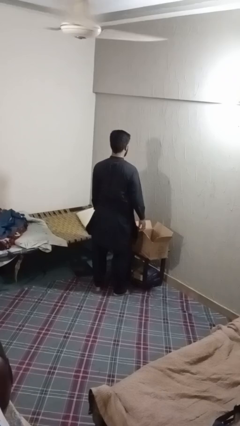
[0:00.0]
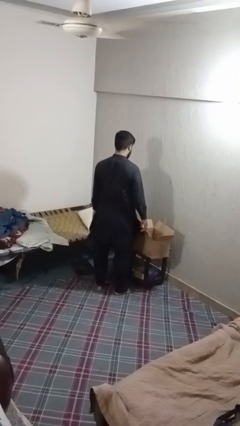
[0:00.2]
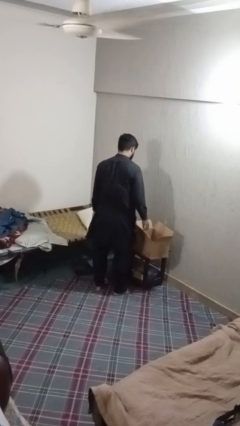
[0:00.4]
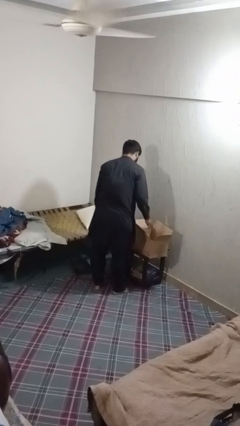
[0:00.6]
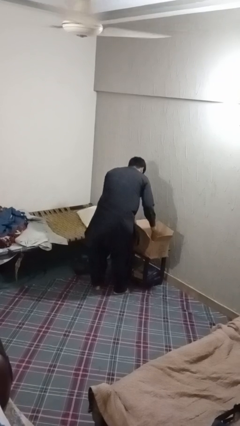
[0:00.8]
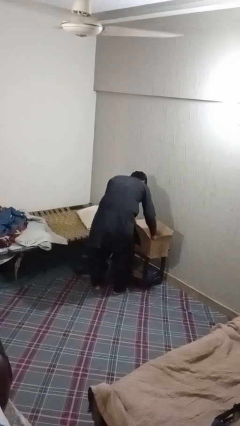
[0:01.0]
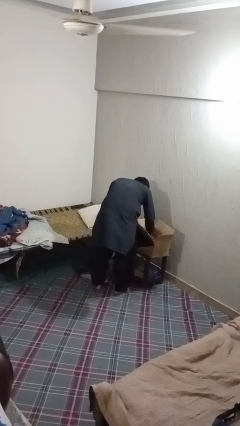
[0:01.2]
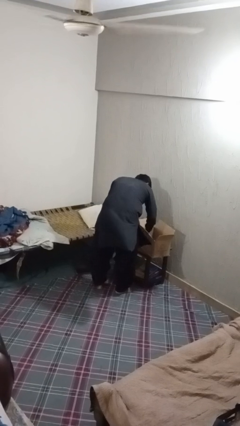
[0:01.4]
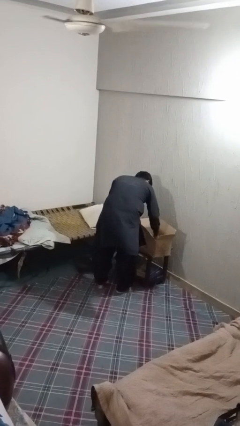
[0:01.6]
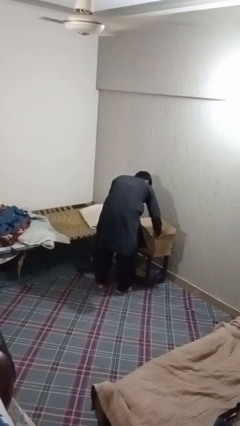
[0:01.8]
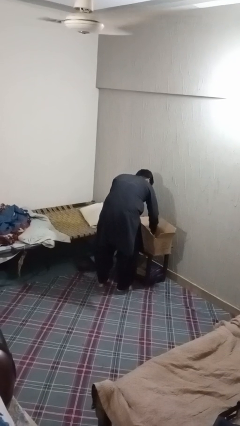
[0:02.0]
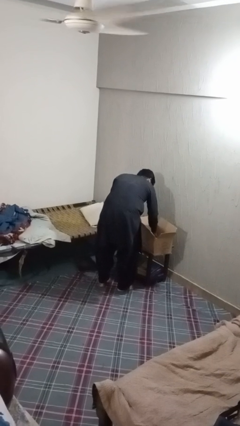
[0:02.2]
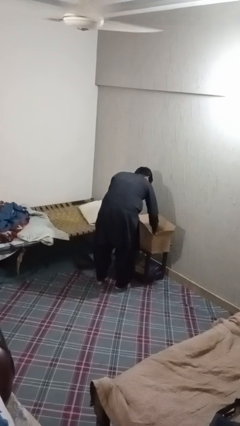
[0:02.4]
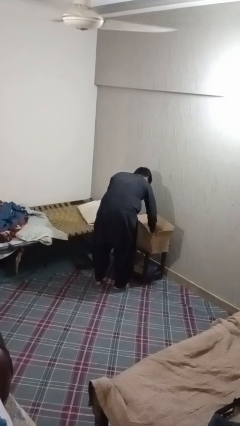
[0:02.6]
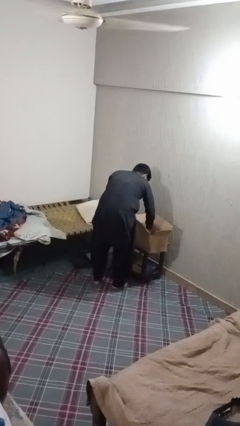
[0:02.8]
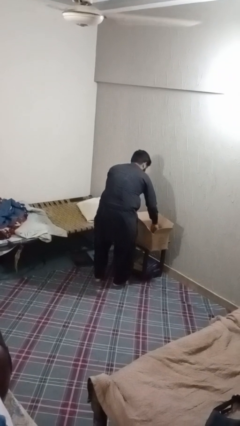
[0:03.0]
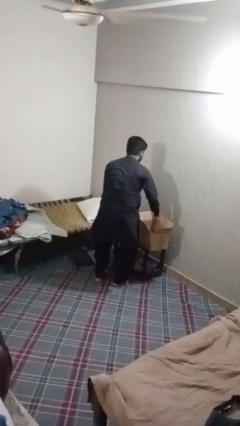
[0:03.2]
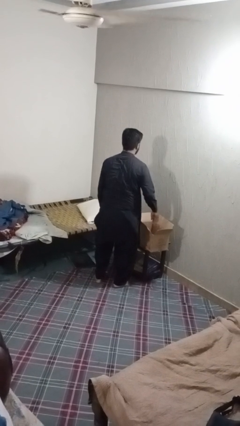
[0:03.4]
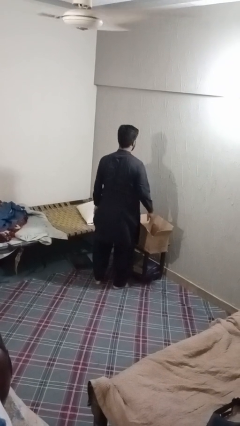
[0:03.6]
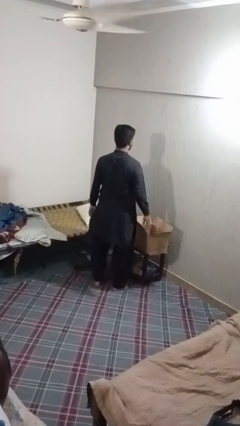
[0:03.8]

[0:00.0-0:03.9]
person searches in box

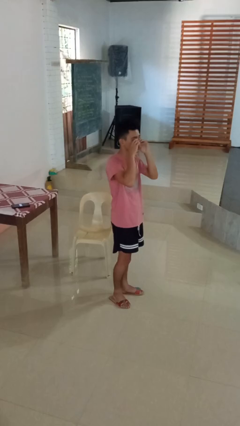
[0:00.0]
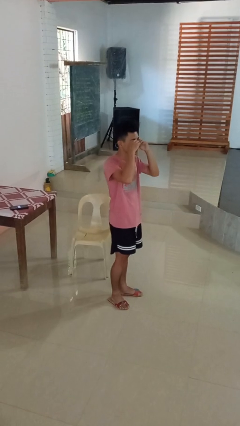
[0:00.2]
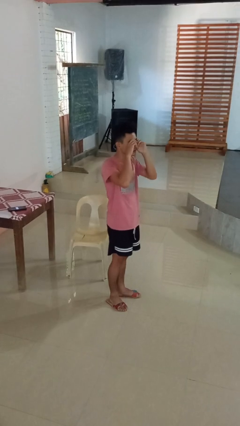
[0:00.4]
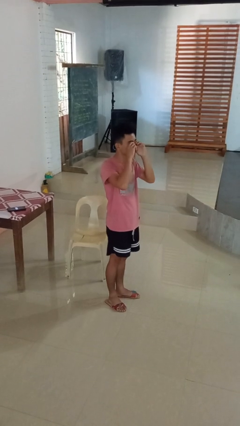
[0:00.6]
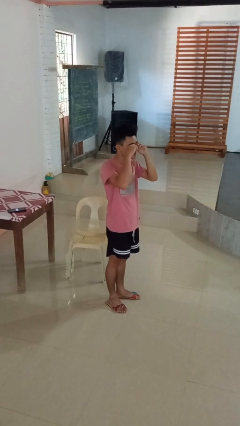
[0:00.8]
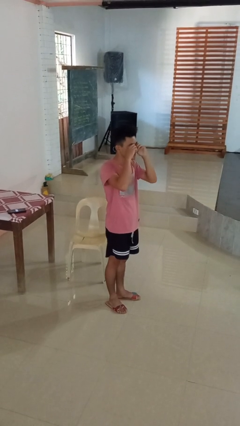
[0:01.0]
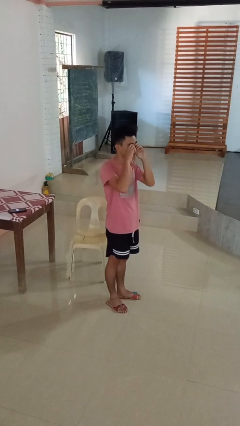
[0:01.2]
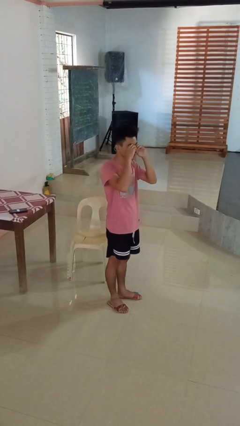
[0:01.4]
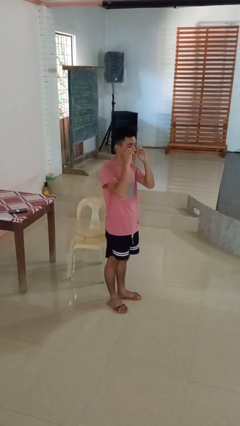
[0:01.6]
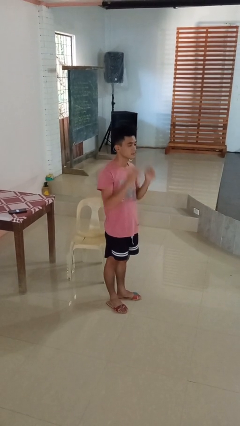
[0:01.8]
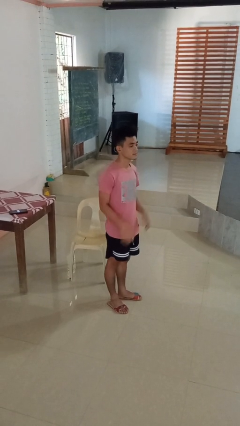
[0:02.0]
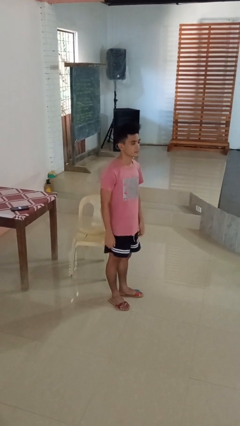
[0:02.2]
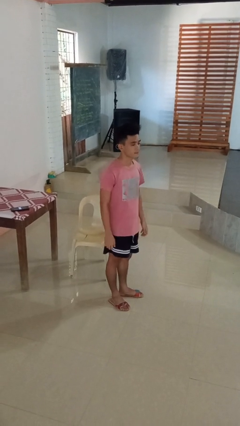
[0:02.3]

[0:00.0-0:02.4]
person rubs eyes

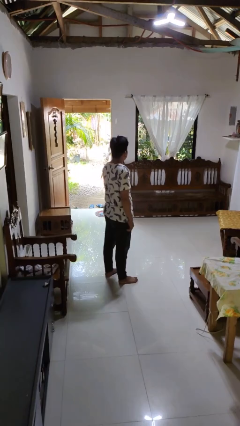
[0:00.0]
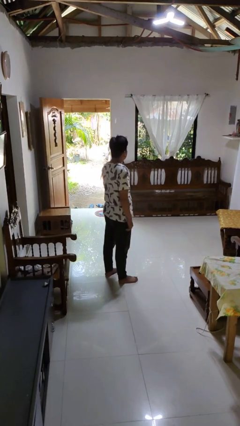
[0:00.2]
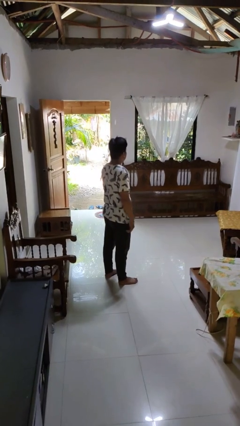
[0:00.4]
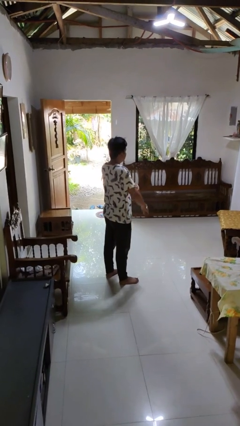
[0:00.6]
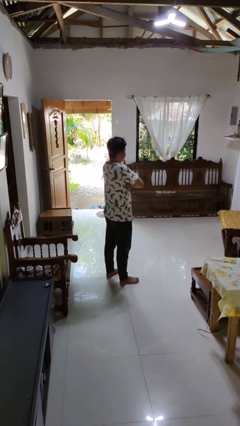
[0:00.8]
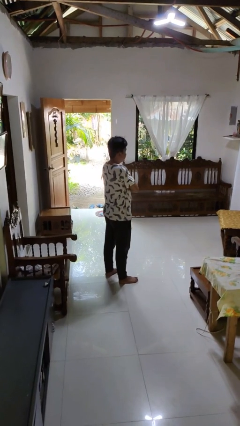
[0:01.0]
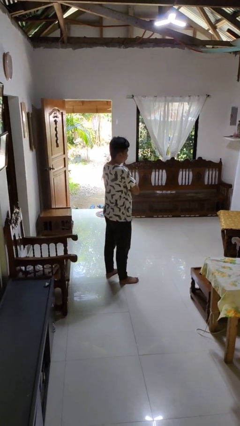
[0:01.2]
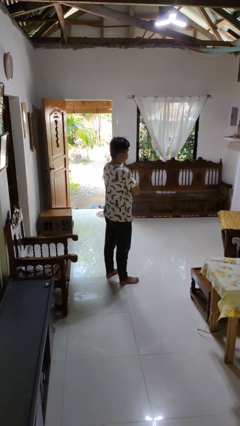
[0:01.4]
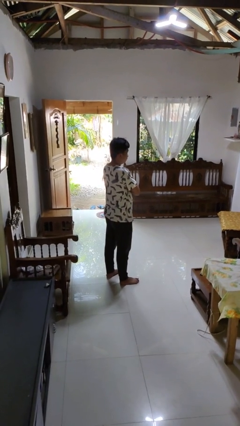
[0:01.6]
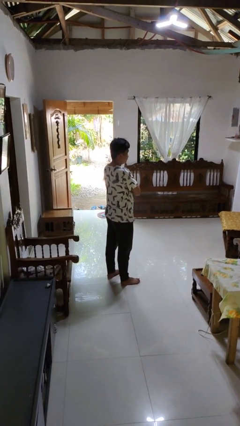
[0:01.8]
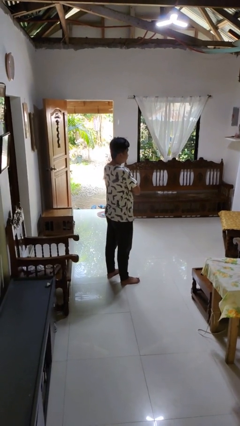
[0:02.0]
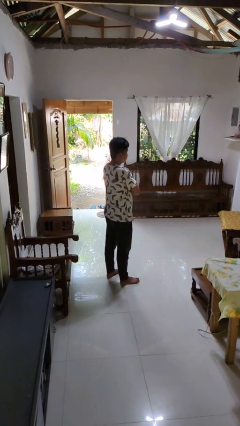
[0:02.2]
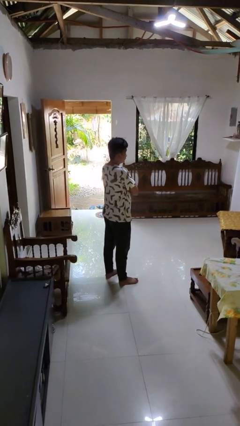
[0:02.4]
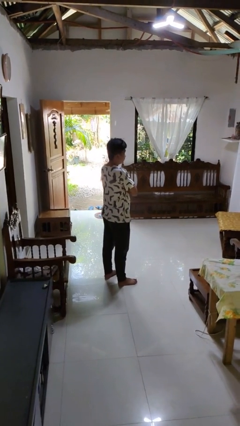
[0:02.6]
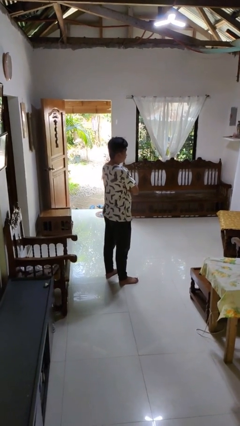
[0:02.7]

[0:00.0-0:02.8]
person crosses arms

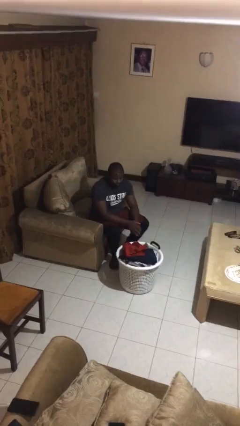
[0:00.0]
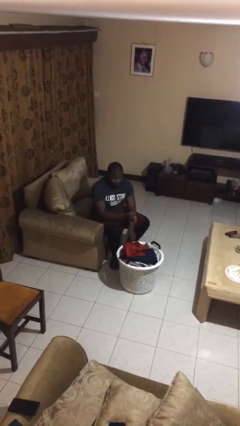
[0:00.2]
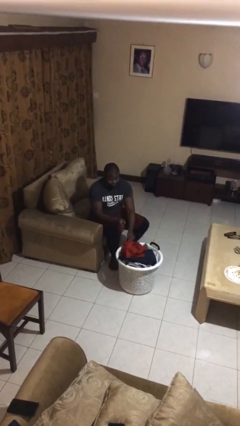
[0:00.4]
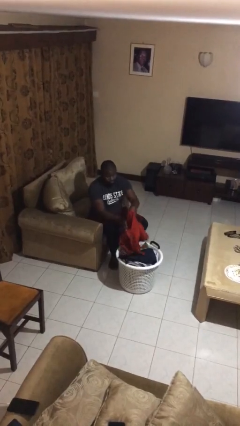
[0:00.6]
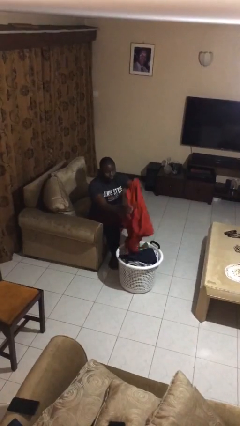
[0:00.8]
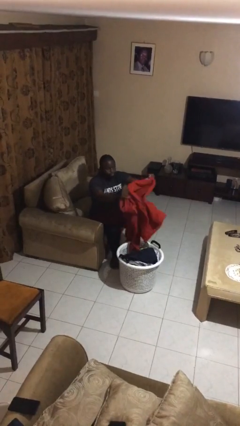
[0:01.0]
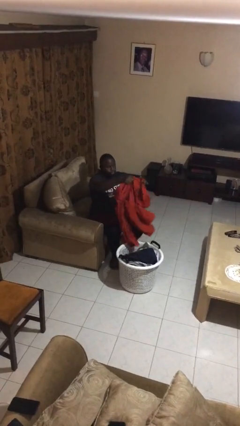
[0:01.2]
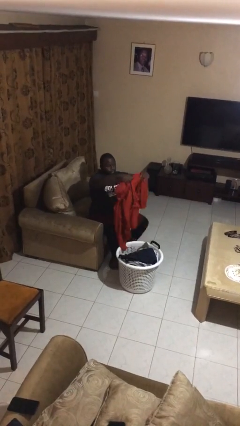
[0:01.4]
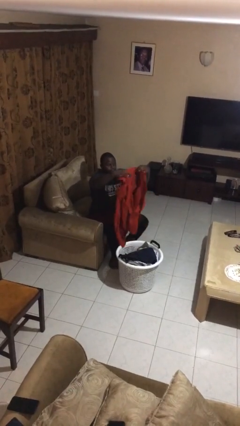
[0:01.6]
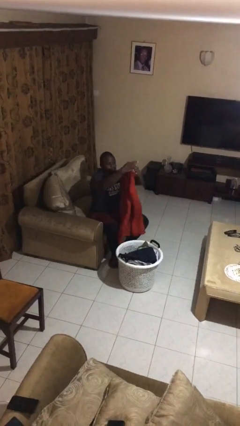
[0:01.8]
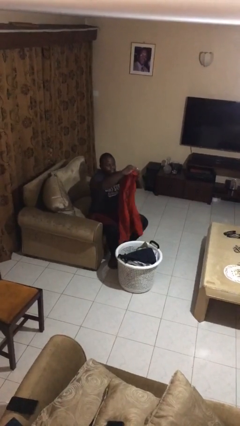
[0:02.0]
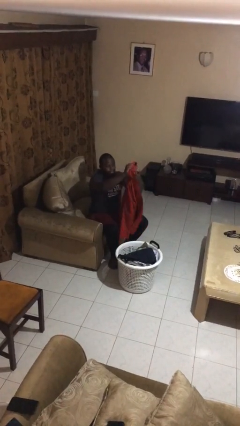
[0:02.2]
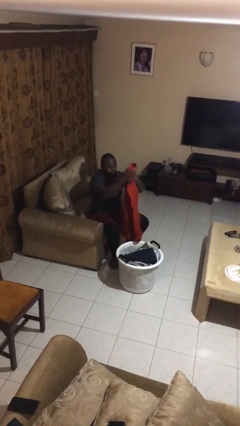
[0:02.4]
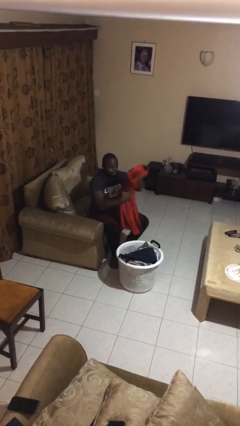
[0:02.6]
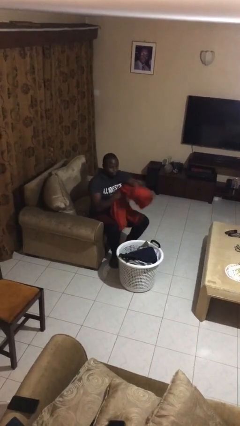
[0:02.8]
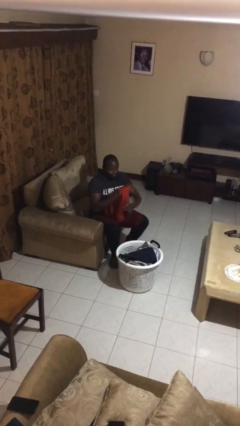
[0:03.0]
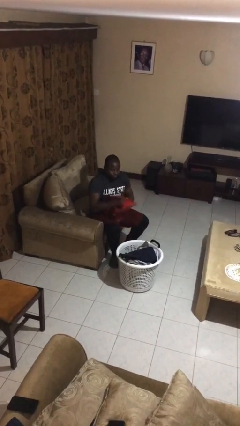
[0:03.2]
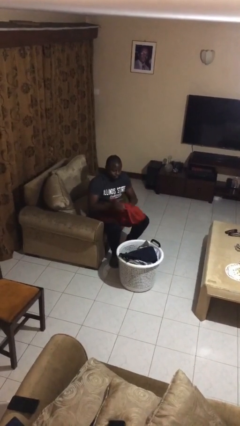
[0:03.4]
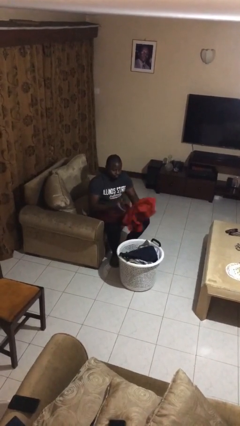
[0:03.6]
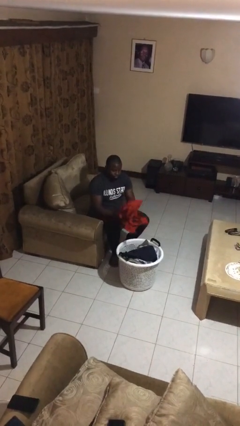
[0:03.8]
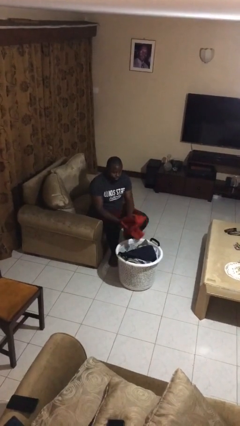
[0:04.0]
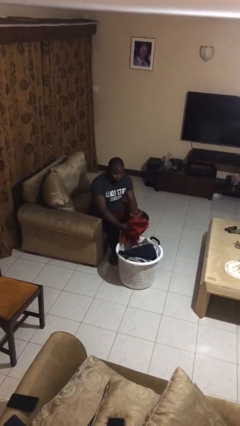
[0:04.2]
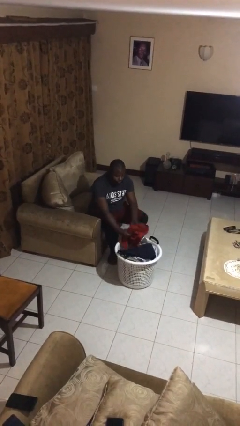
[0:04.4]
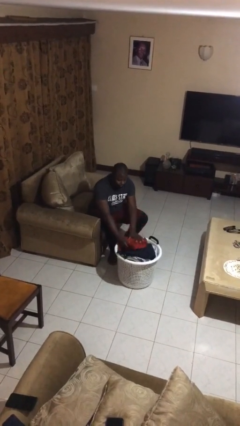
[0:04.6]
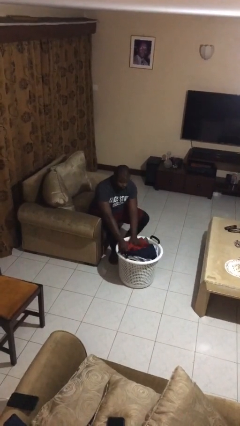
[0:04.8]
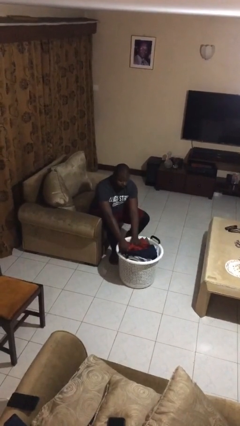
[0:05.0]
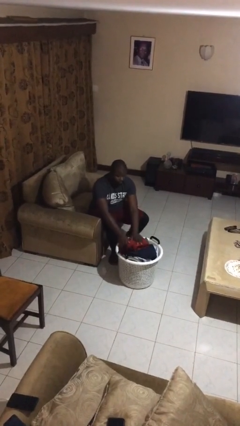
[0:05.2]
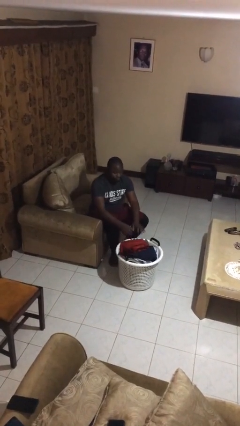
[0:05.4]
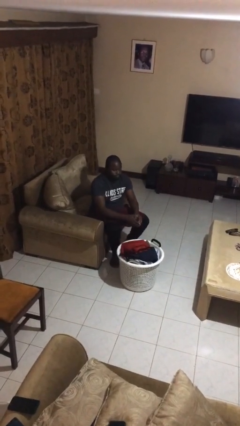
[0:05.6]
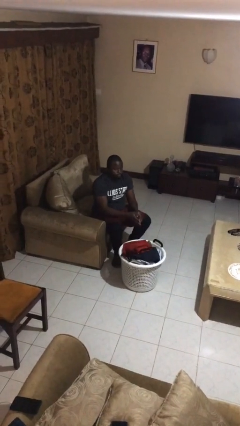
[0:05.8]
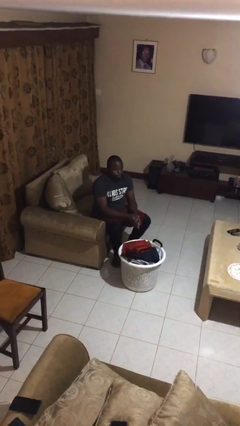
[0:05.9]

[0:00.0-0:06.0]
person folds shirt

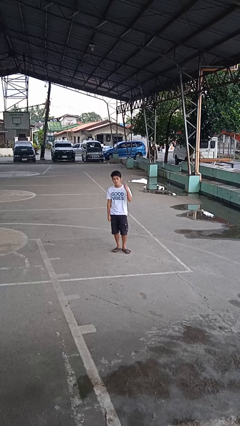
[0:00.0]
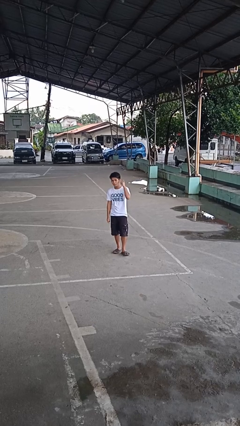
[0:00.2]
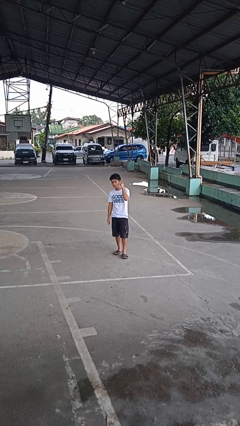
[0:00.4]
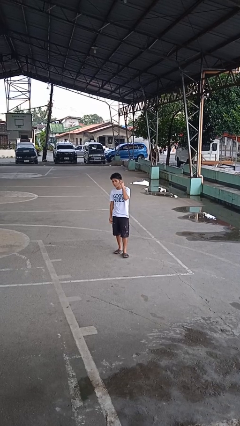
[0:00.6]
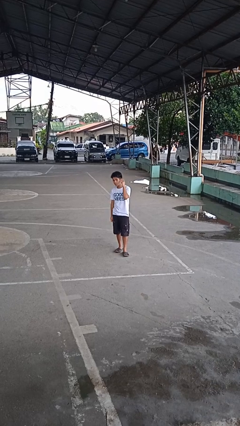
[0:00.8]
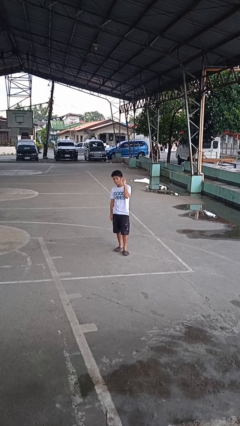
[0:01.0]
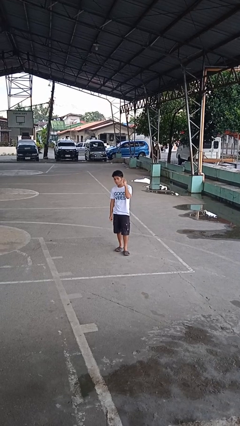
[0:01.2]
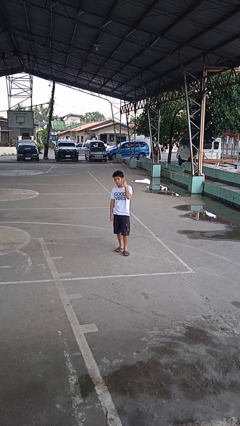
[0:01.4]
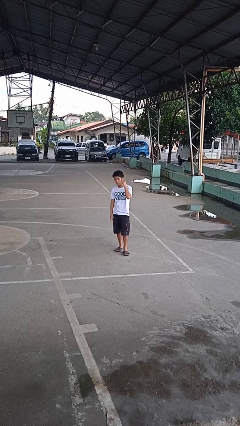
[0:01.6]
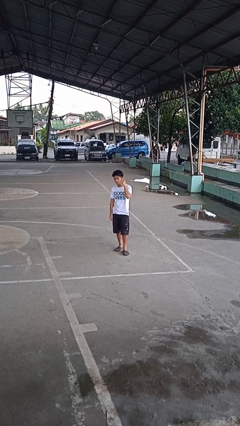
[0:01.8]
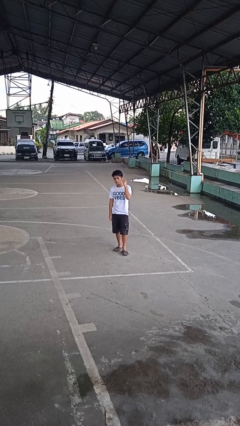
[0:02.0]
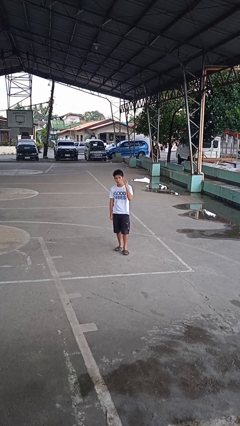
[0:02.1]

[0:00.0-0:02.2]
person gestures listen closely

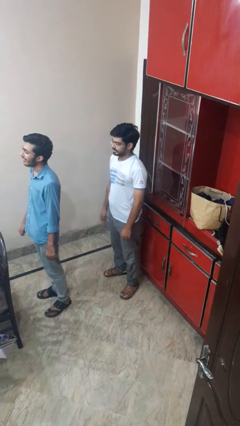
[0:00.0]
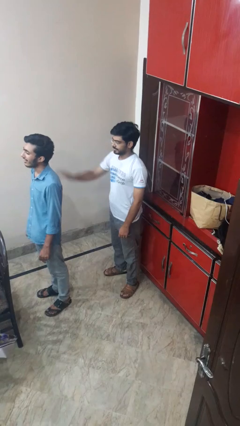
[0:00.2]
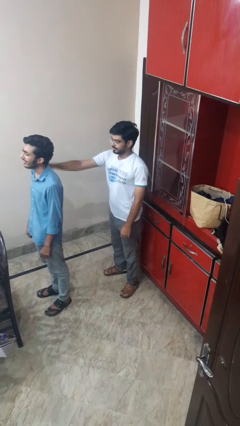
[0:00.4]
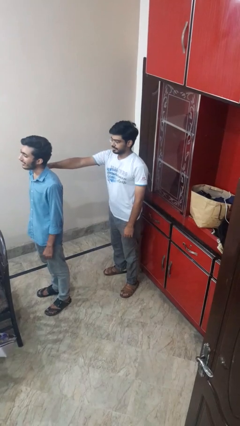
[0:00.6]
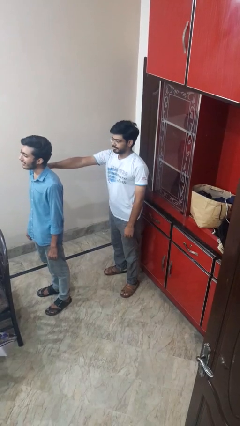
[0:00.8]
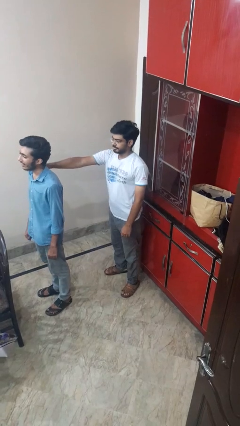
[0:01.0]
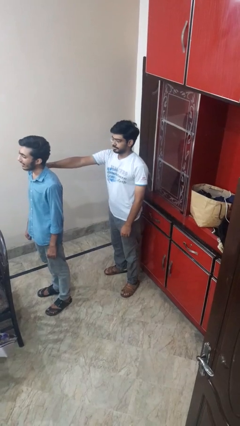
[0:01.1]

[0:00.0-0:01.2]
person grabs person by shoulder
